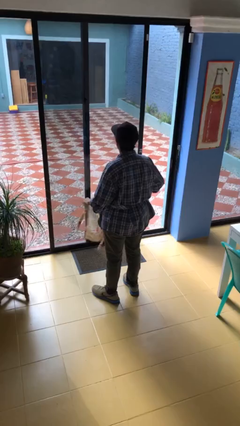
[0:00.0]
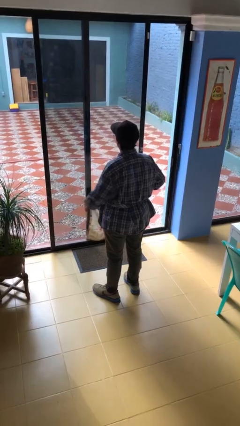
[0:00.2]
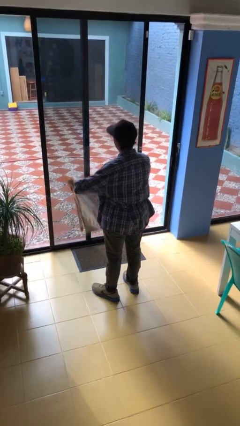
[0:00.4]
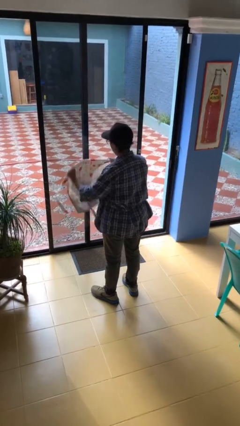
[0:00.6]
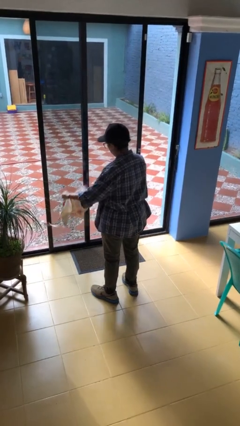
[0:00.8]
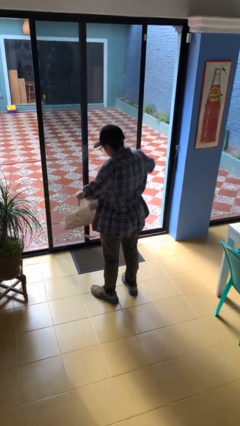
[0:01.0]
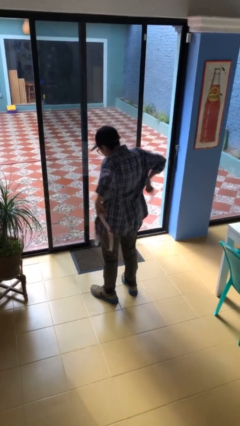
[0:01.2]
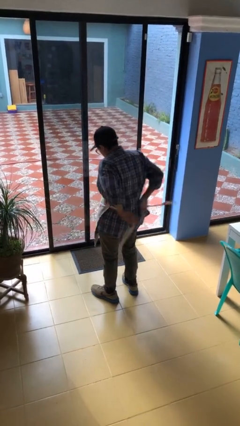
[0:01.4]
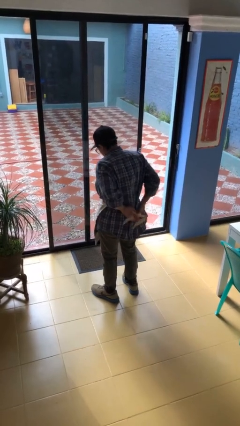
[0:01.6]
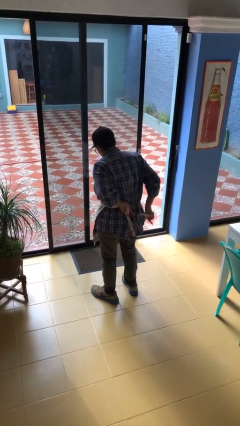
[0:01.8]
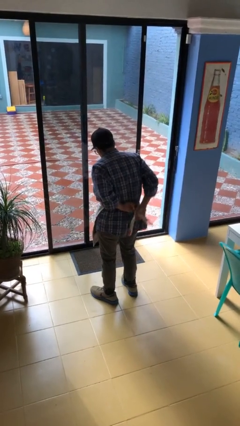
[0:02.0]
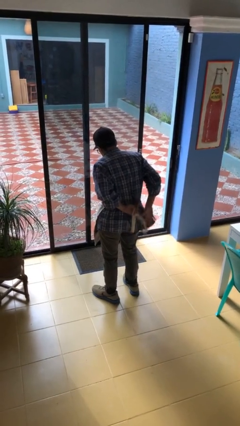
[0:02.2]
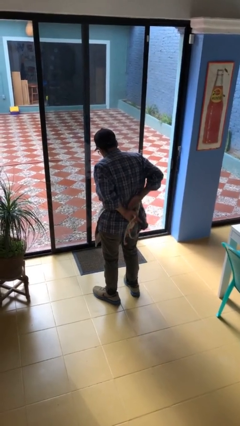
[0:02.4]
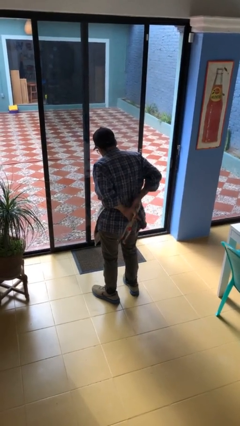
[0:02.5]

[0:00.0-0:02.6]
person puts on apron

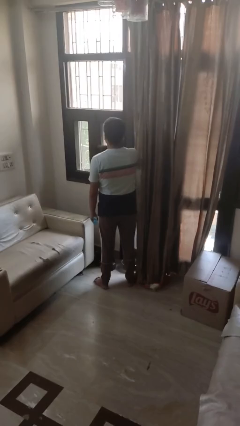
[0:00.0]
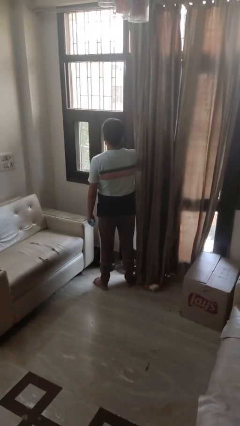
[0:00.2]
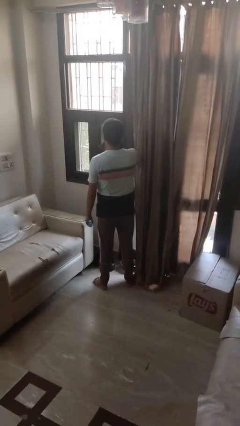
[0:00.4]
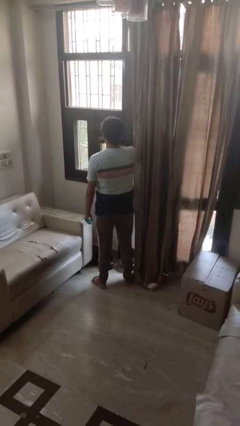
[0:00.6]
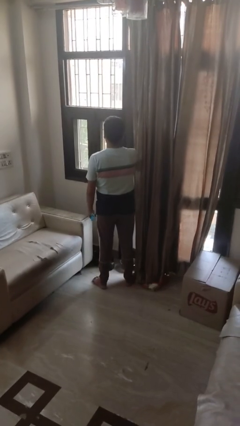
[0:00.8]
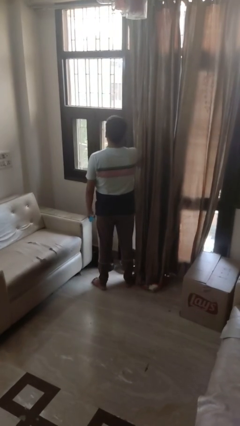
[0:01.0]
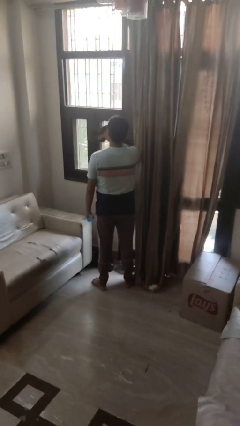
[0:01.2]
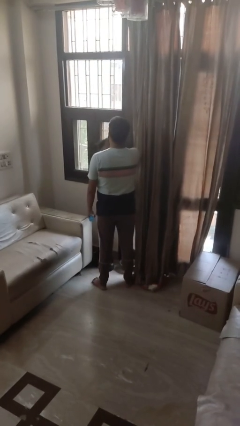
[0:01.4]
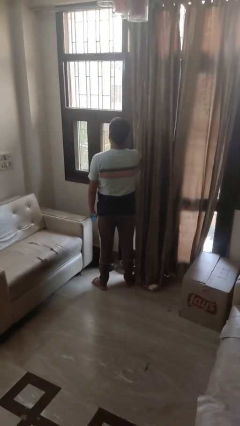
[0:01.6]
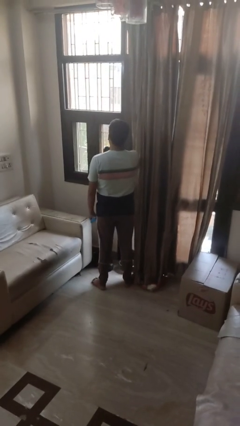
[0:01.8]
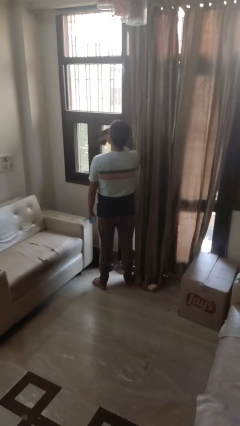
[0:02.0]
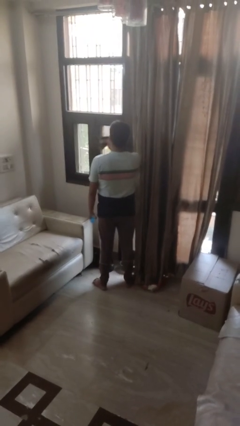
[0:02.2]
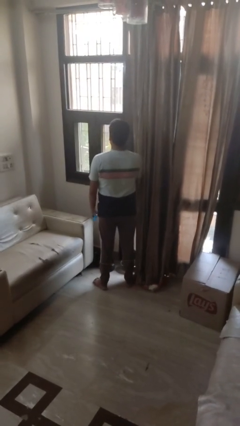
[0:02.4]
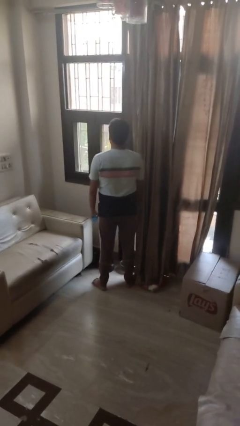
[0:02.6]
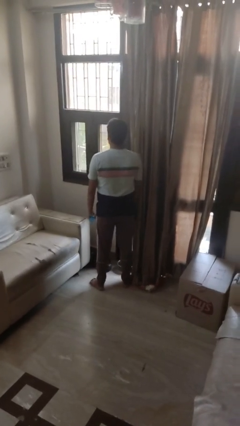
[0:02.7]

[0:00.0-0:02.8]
person washes window

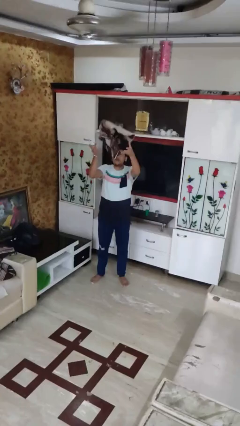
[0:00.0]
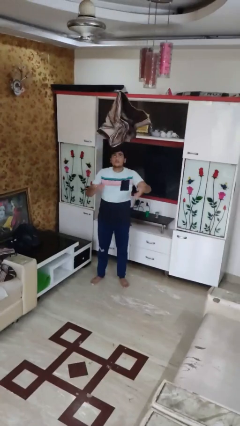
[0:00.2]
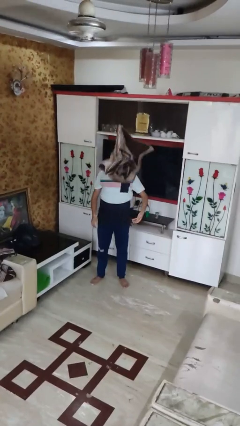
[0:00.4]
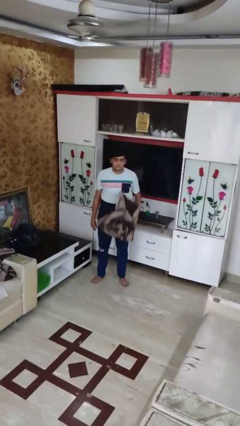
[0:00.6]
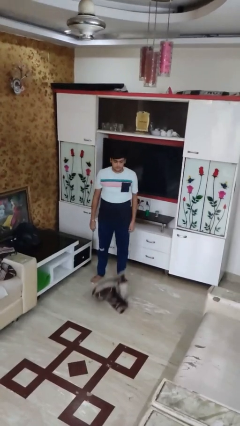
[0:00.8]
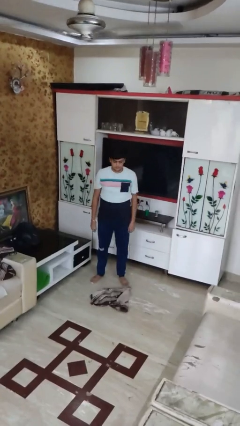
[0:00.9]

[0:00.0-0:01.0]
person throws object into air

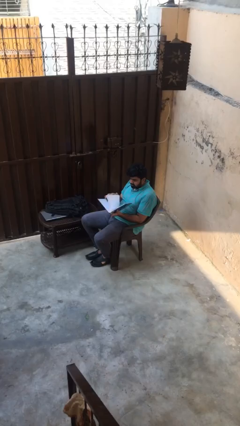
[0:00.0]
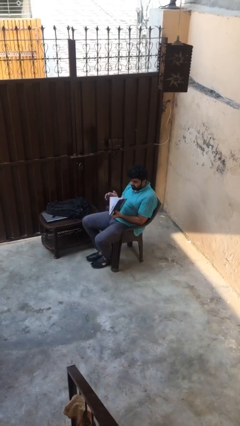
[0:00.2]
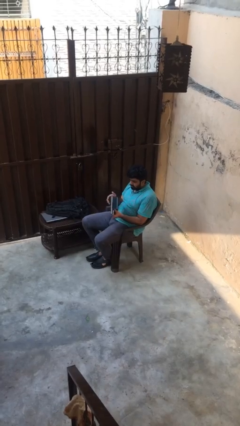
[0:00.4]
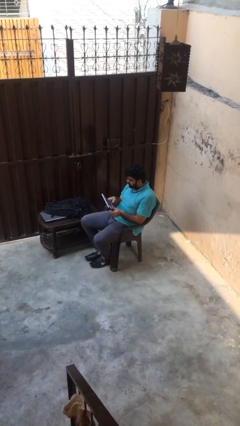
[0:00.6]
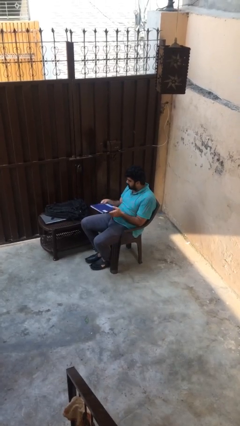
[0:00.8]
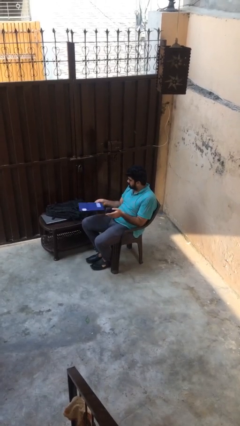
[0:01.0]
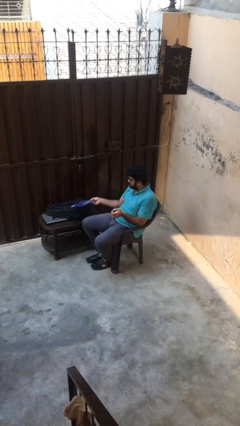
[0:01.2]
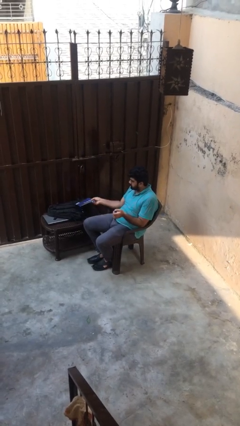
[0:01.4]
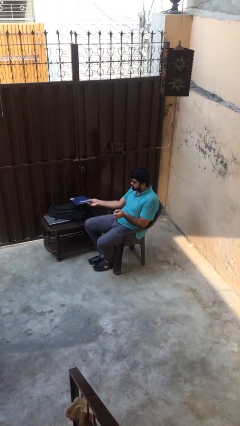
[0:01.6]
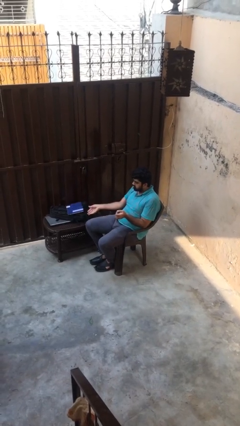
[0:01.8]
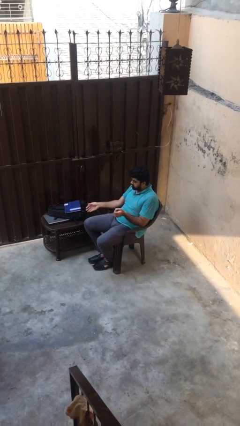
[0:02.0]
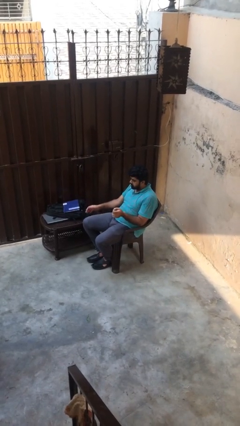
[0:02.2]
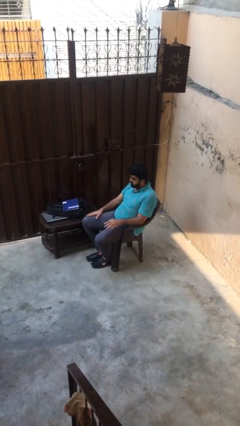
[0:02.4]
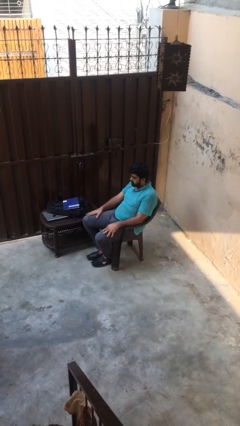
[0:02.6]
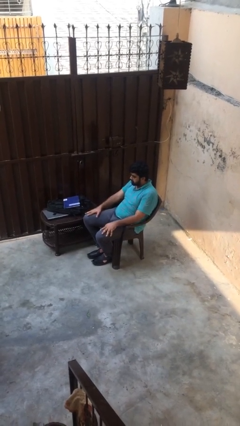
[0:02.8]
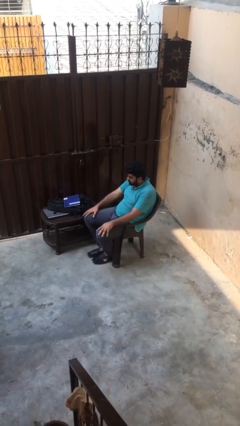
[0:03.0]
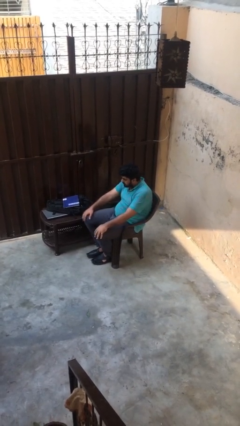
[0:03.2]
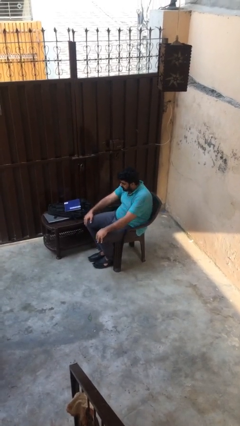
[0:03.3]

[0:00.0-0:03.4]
person puts down object on table

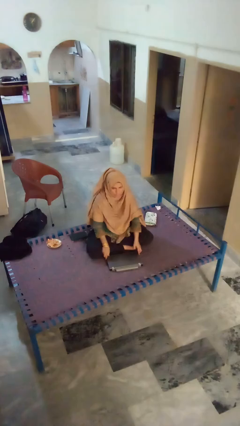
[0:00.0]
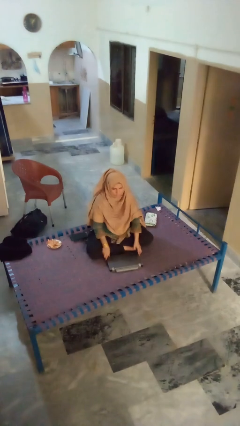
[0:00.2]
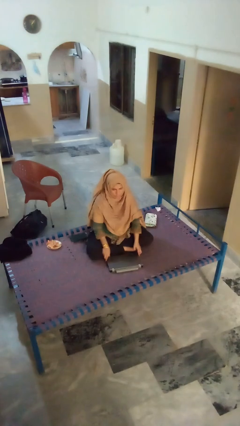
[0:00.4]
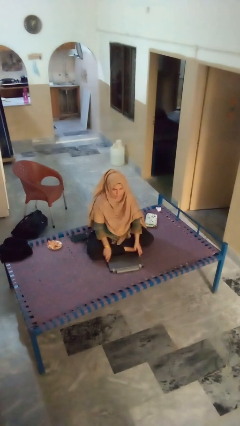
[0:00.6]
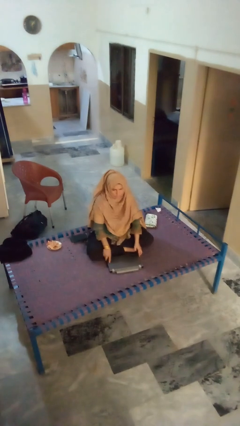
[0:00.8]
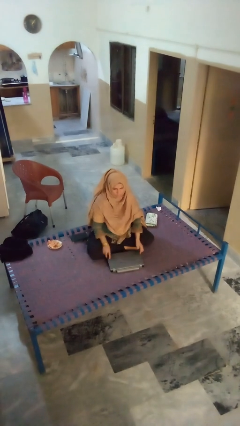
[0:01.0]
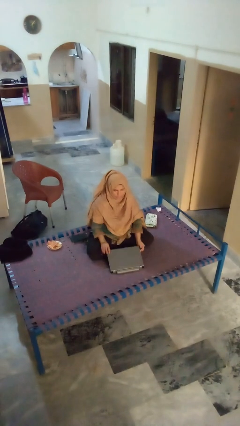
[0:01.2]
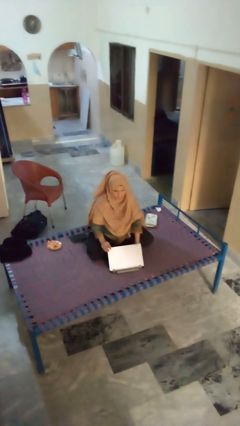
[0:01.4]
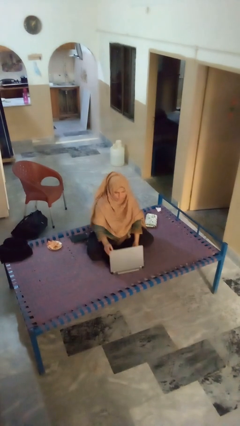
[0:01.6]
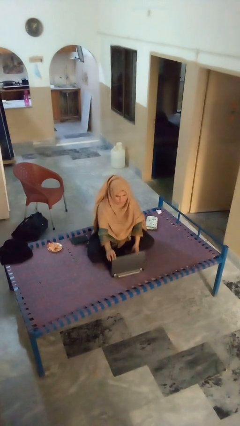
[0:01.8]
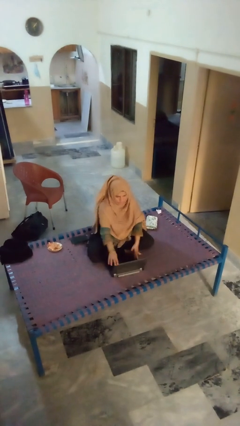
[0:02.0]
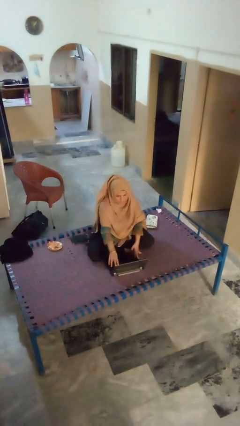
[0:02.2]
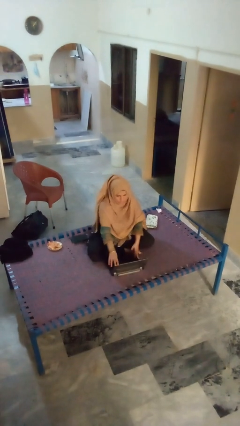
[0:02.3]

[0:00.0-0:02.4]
person opens laptop

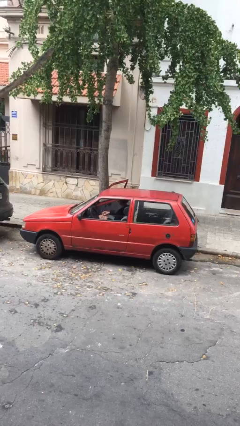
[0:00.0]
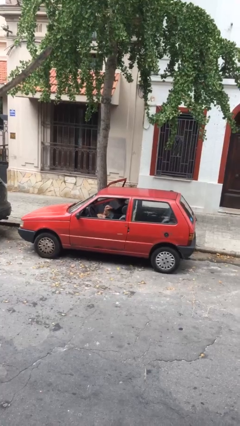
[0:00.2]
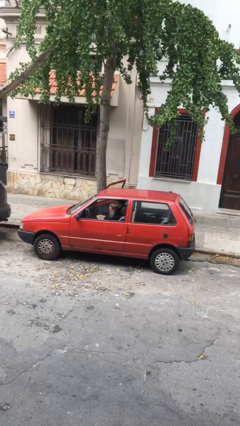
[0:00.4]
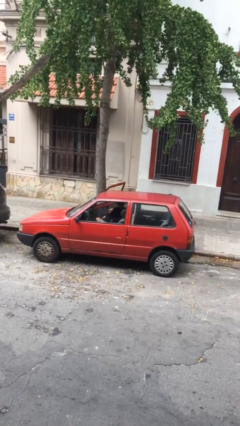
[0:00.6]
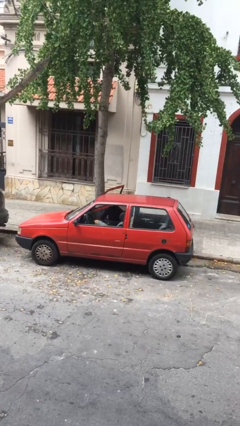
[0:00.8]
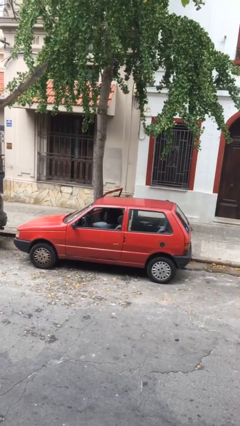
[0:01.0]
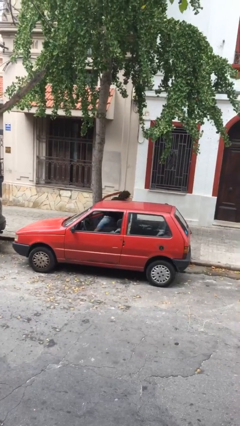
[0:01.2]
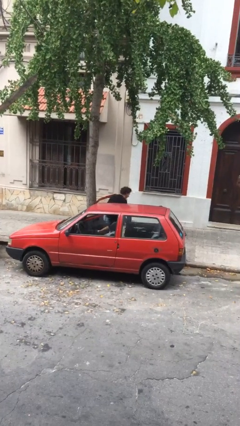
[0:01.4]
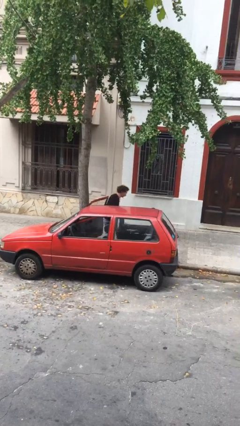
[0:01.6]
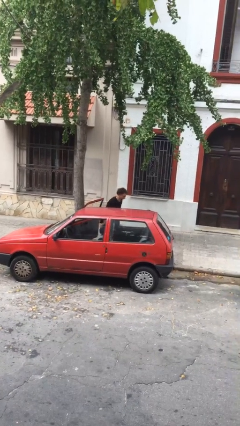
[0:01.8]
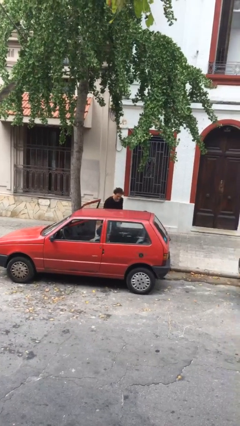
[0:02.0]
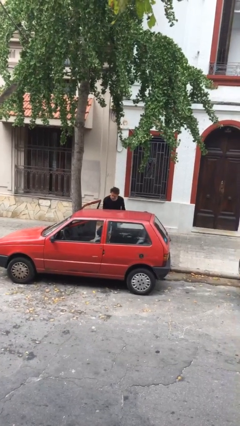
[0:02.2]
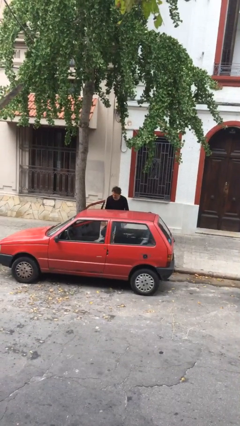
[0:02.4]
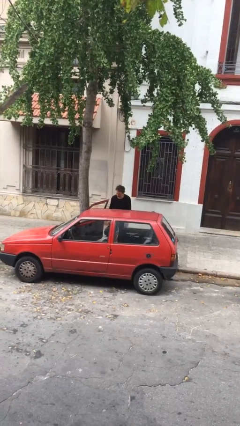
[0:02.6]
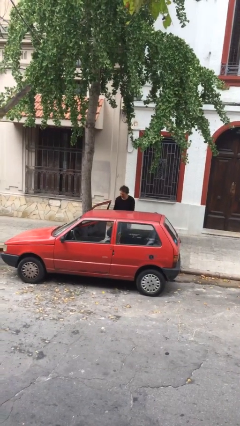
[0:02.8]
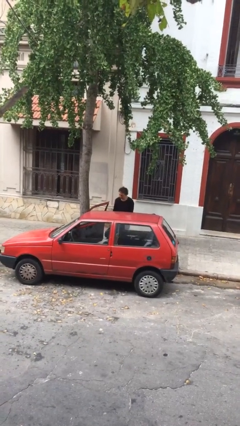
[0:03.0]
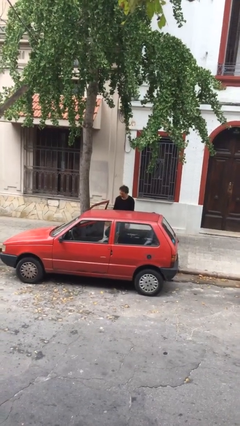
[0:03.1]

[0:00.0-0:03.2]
person exits car

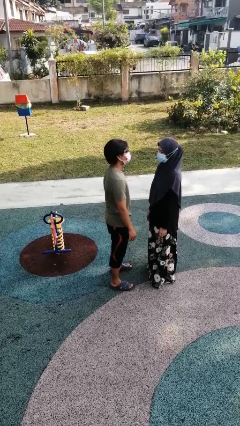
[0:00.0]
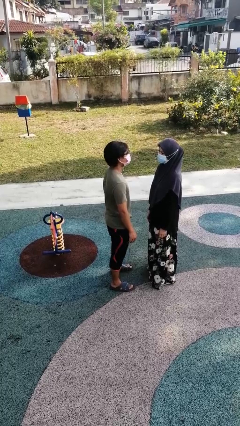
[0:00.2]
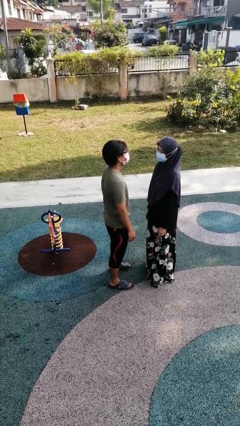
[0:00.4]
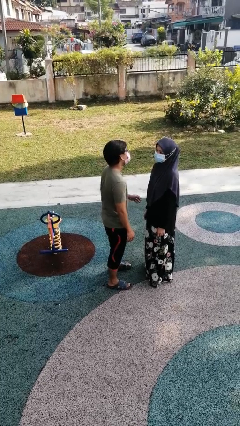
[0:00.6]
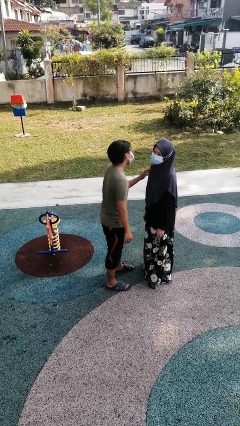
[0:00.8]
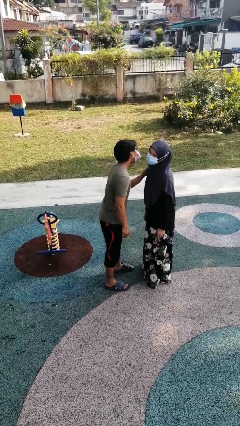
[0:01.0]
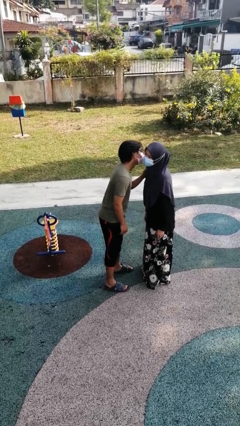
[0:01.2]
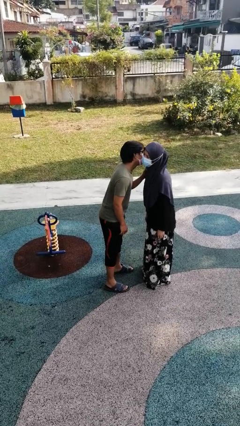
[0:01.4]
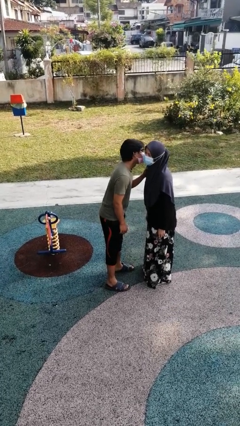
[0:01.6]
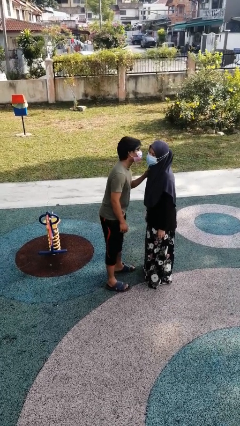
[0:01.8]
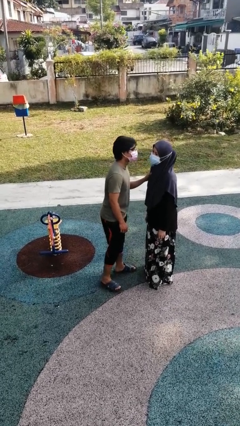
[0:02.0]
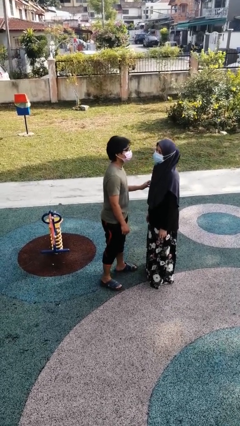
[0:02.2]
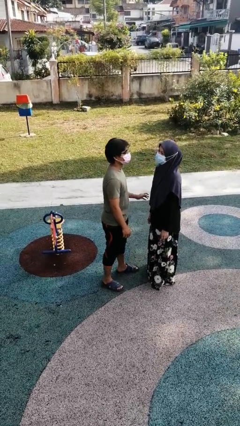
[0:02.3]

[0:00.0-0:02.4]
person kisses cheek of person
